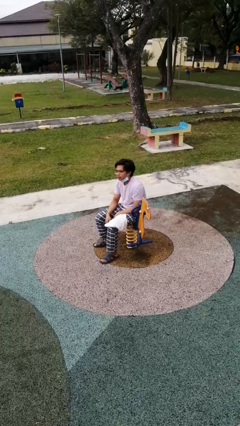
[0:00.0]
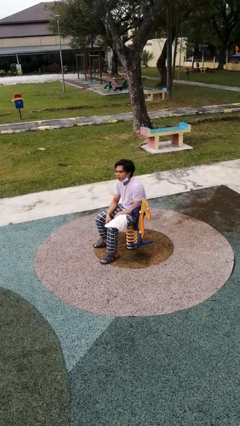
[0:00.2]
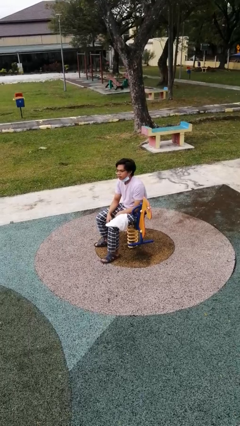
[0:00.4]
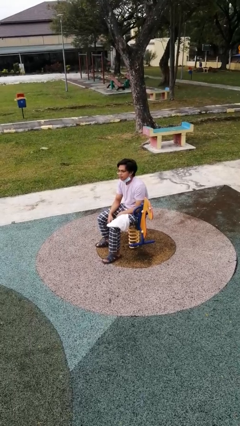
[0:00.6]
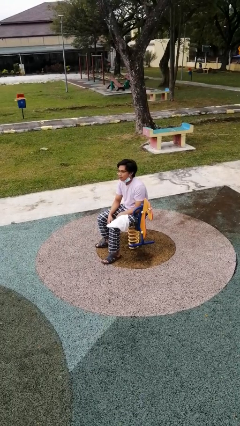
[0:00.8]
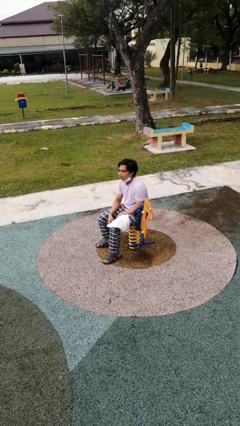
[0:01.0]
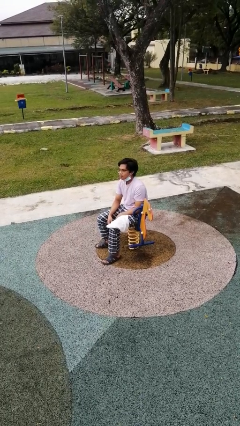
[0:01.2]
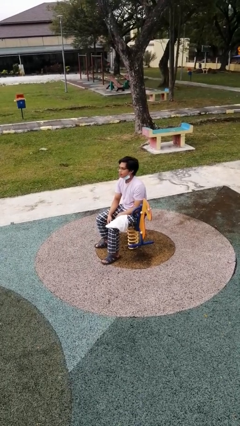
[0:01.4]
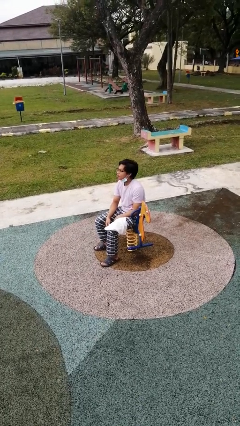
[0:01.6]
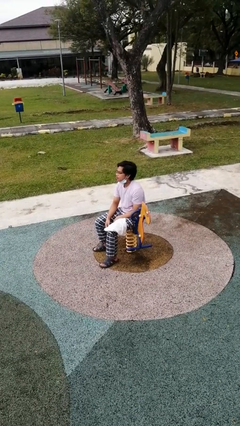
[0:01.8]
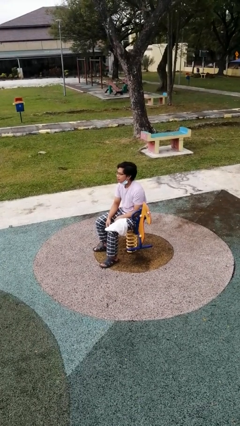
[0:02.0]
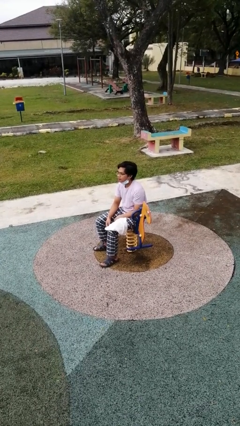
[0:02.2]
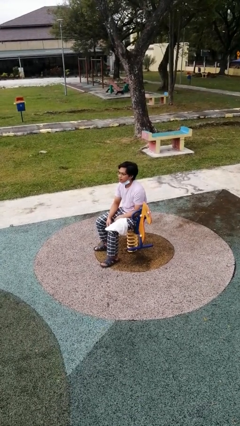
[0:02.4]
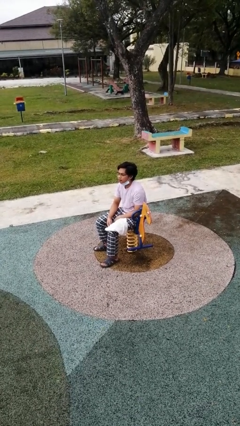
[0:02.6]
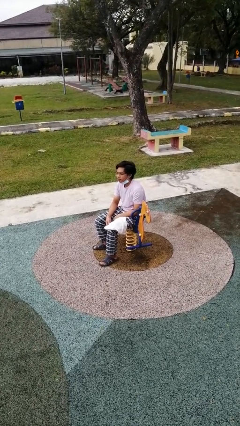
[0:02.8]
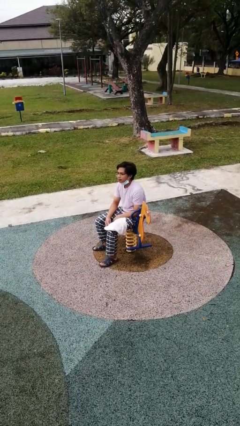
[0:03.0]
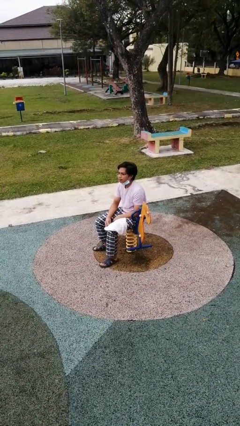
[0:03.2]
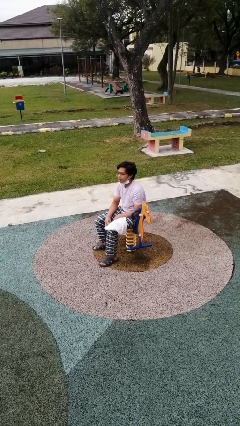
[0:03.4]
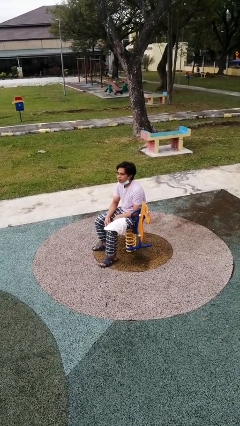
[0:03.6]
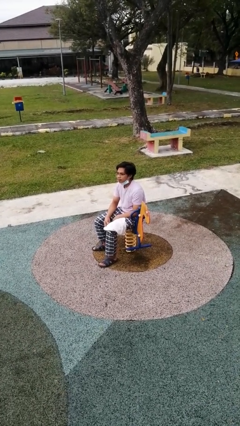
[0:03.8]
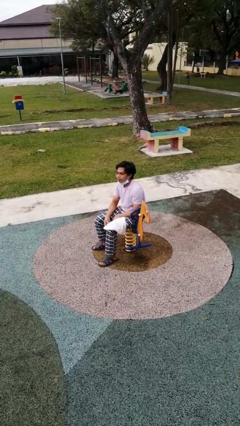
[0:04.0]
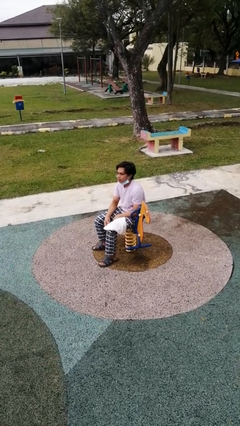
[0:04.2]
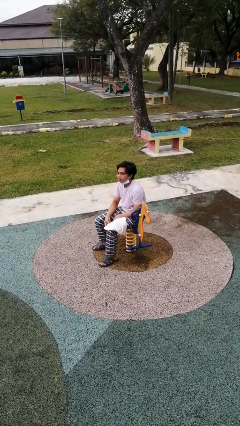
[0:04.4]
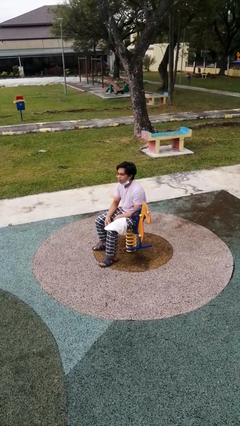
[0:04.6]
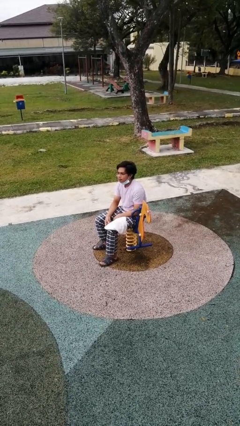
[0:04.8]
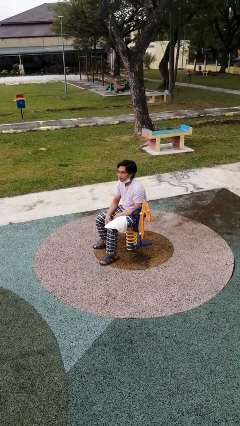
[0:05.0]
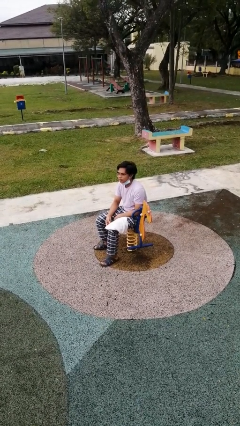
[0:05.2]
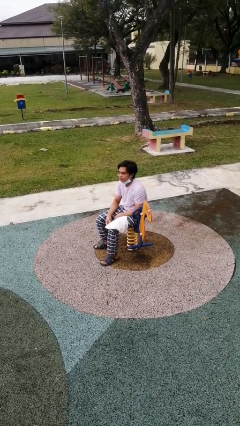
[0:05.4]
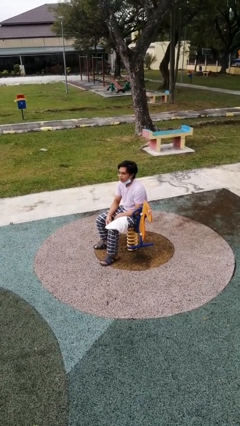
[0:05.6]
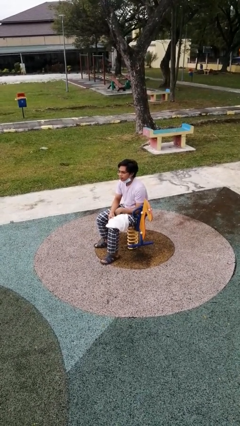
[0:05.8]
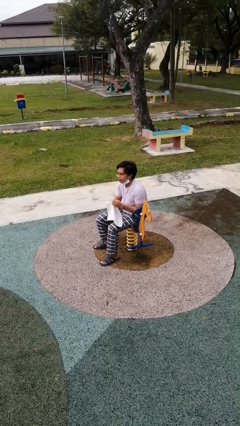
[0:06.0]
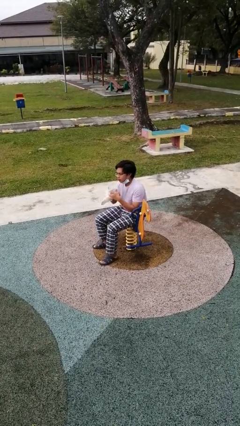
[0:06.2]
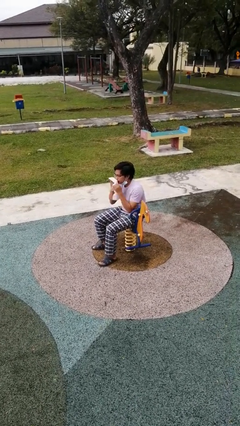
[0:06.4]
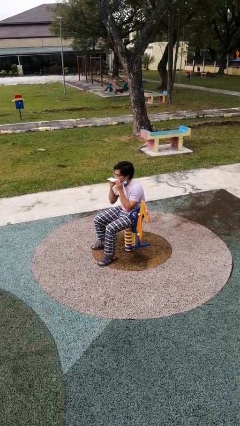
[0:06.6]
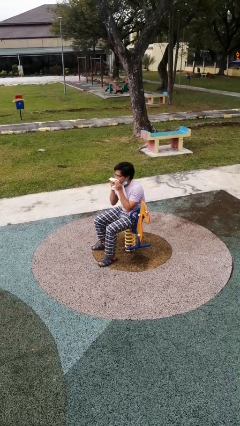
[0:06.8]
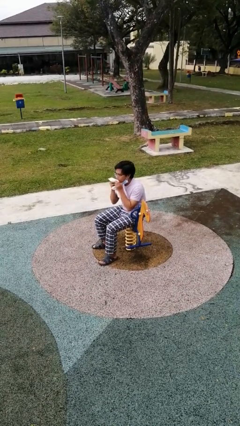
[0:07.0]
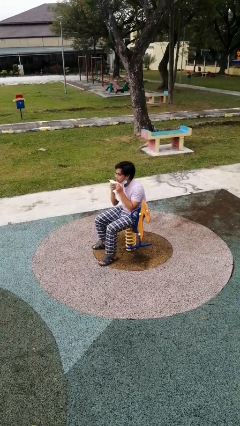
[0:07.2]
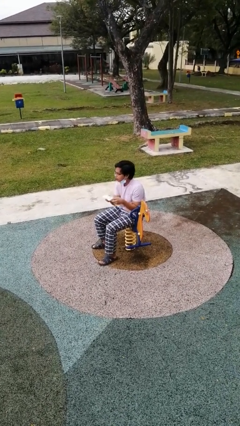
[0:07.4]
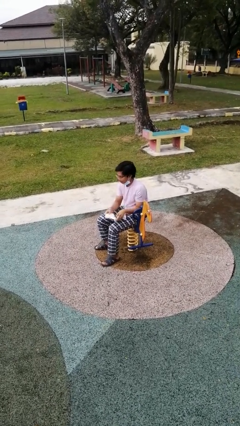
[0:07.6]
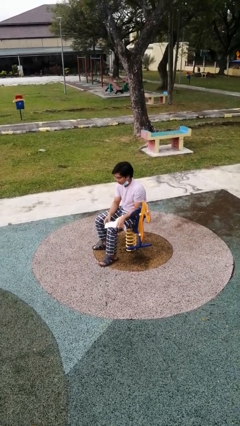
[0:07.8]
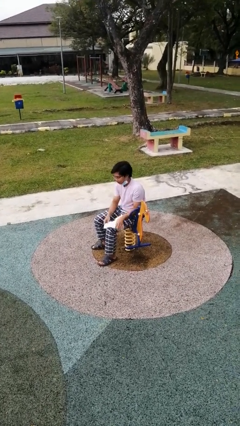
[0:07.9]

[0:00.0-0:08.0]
person wipes mouth with napkin

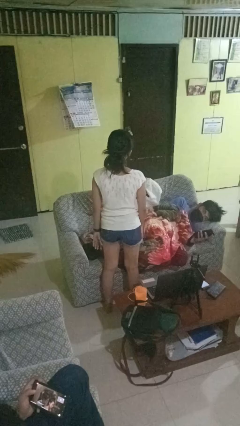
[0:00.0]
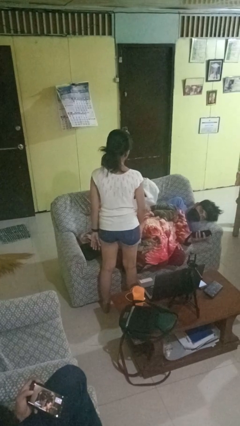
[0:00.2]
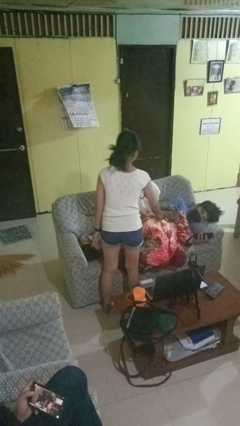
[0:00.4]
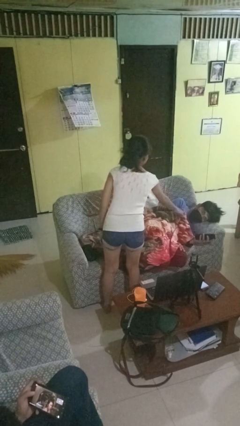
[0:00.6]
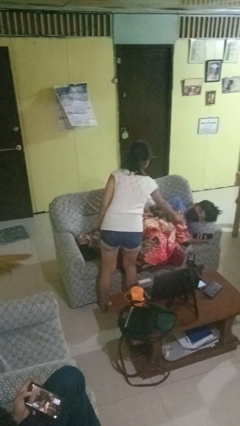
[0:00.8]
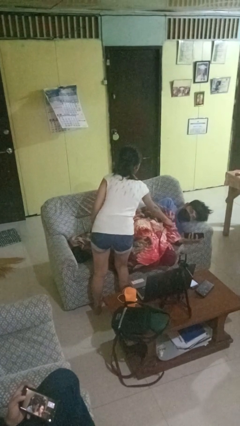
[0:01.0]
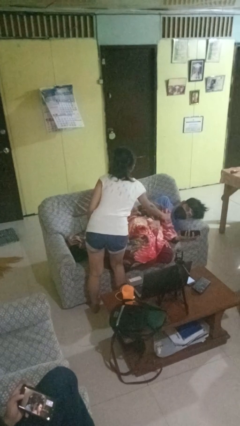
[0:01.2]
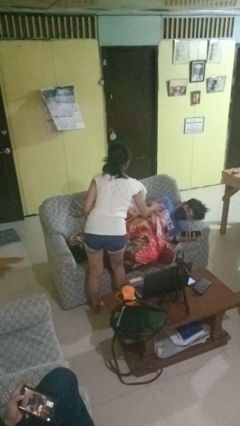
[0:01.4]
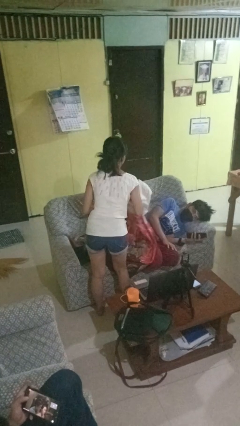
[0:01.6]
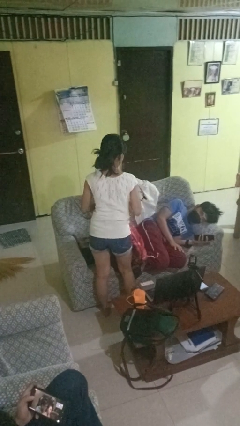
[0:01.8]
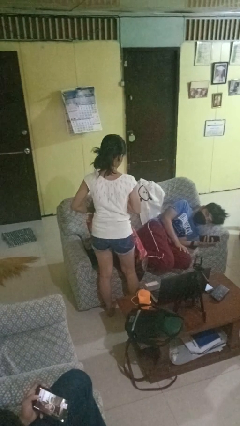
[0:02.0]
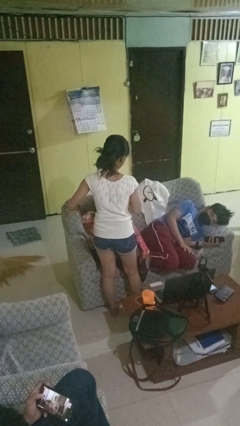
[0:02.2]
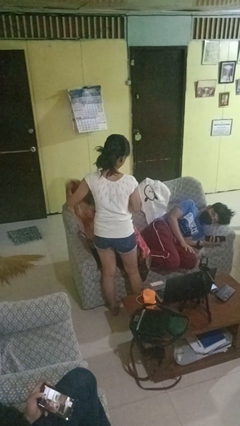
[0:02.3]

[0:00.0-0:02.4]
person uncovers friend with blanket

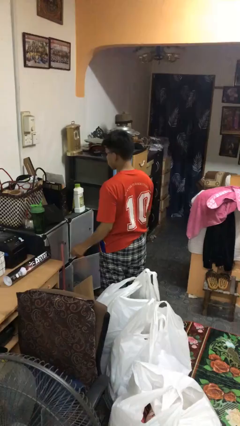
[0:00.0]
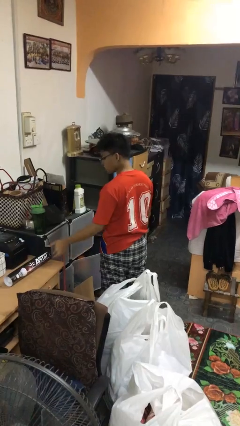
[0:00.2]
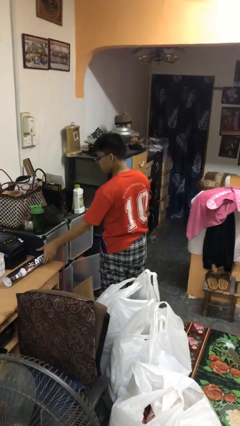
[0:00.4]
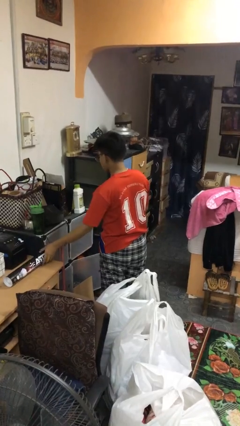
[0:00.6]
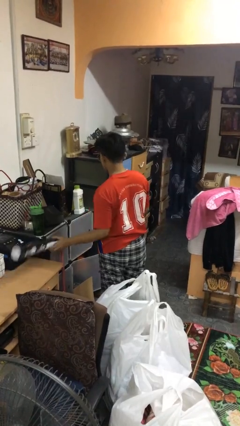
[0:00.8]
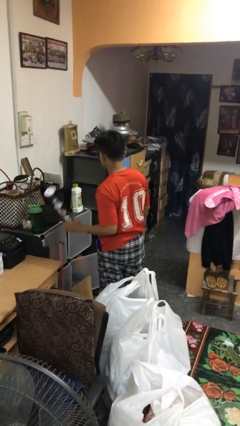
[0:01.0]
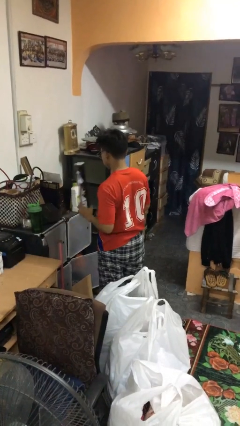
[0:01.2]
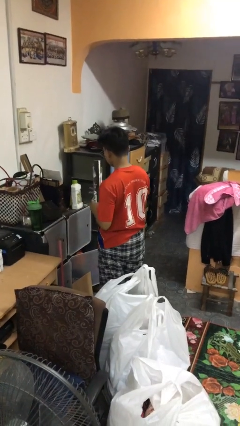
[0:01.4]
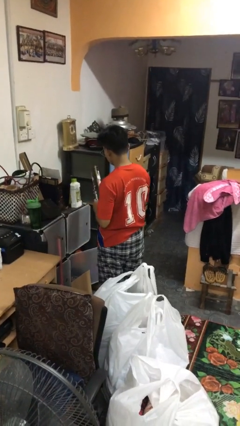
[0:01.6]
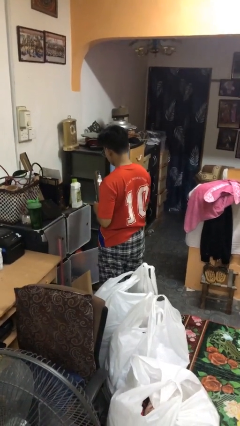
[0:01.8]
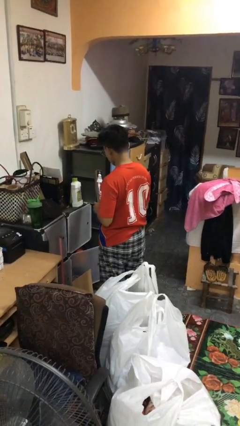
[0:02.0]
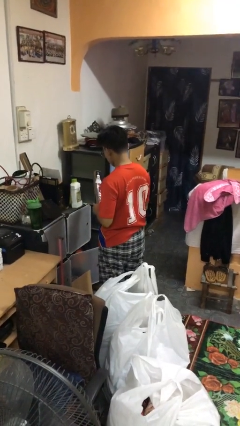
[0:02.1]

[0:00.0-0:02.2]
person picks up object from countertop

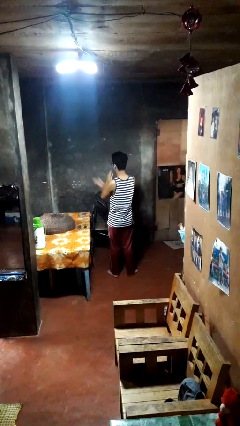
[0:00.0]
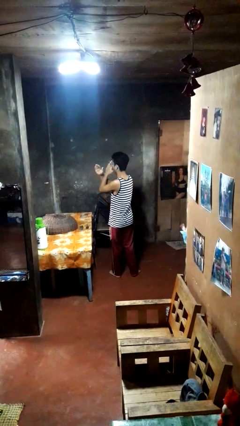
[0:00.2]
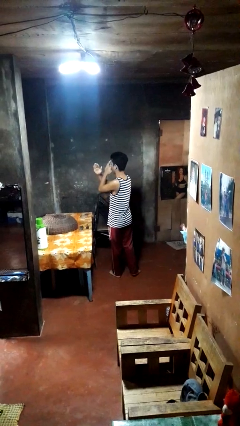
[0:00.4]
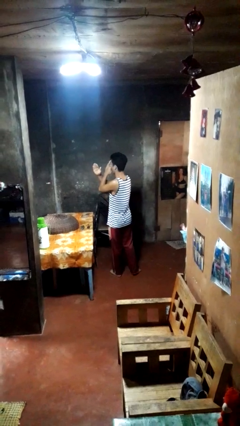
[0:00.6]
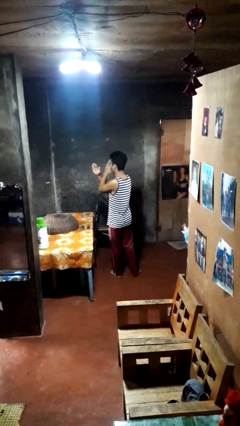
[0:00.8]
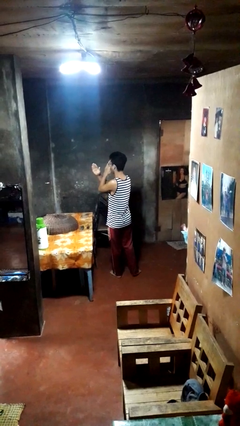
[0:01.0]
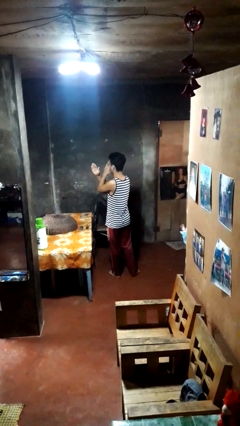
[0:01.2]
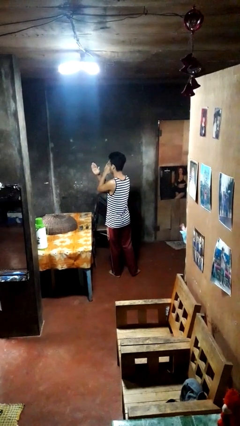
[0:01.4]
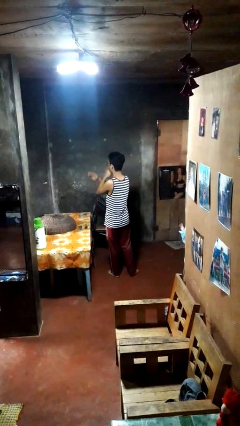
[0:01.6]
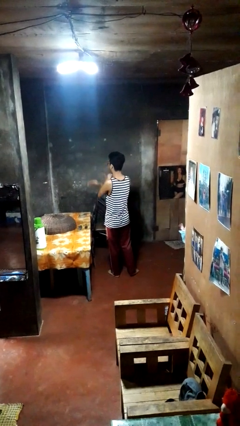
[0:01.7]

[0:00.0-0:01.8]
person gestures arms x

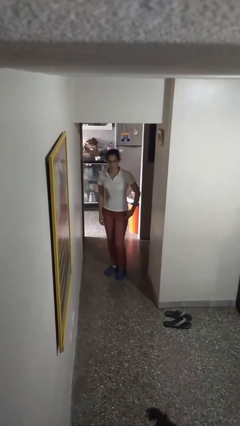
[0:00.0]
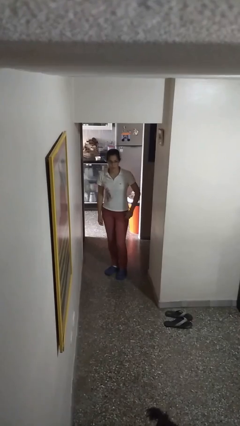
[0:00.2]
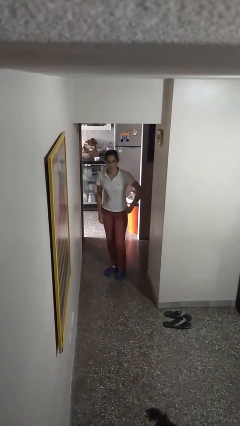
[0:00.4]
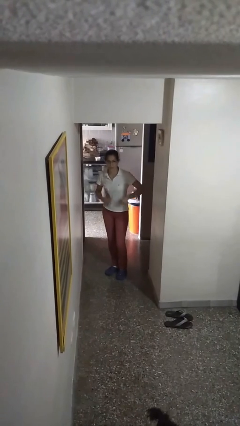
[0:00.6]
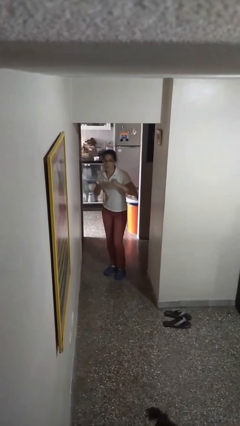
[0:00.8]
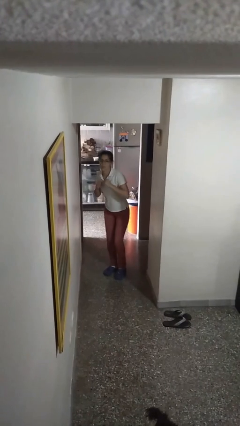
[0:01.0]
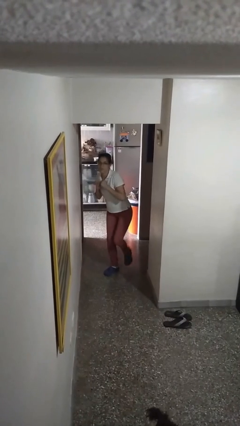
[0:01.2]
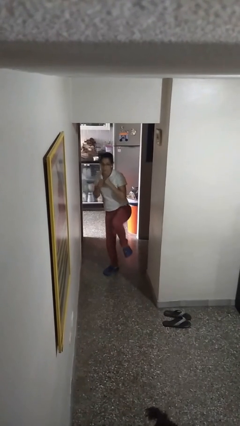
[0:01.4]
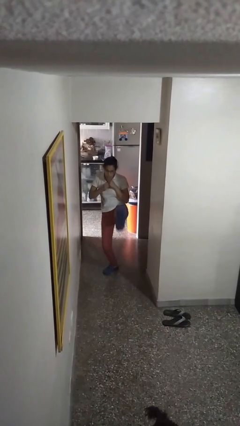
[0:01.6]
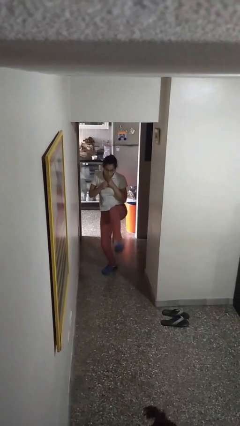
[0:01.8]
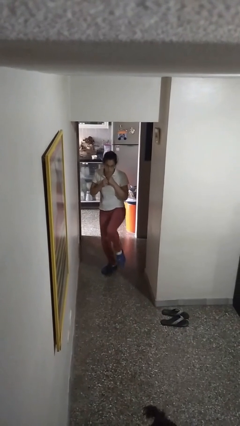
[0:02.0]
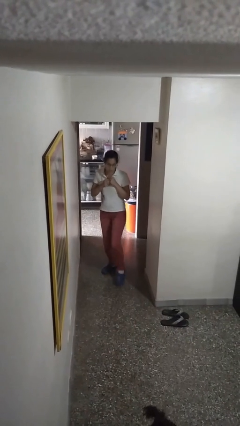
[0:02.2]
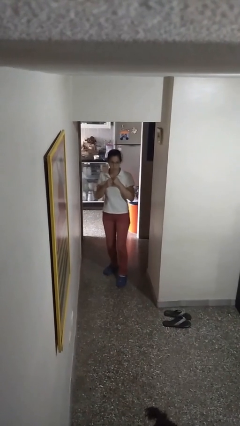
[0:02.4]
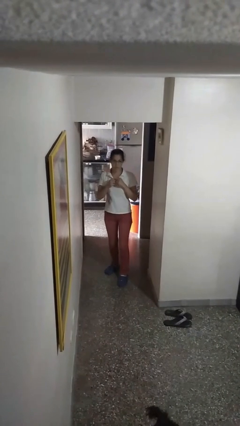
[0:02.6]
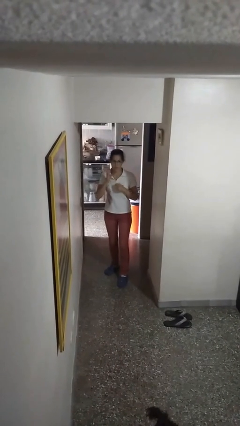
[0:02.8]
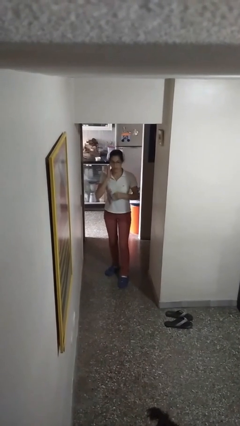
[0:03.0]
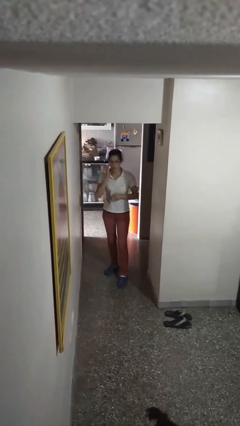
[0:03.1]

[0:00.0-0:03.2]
person karate kicks
